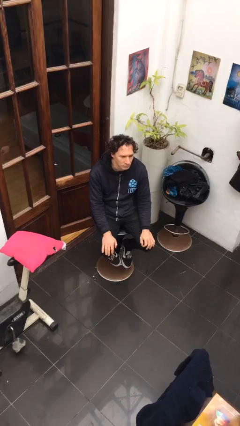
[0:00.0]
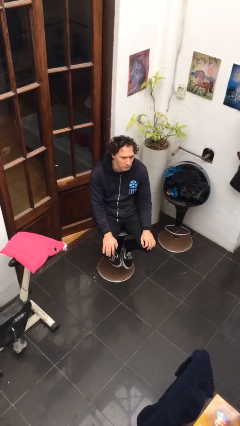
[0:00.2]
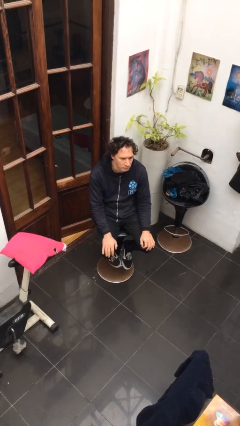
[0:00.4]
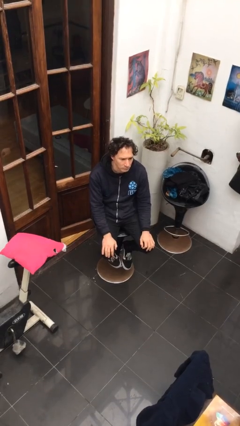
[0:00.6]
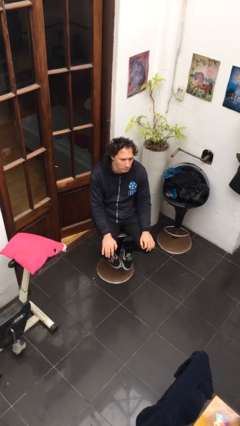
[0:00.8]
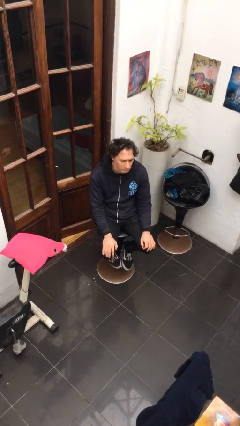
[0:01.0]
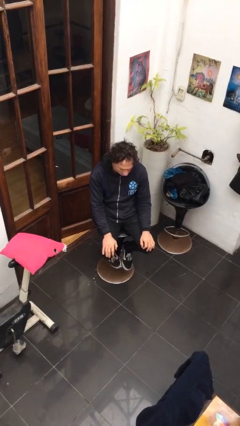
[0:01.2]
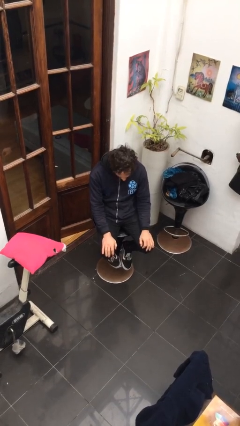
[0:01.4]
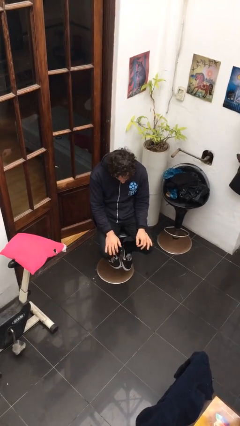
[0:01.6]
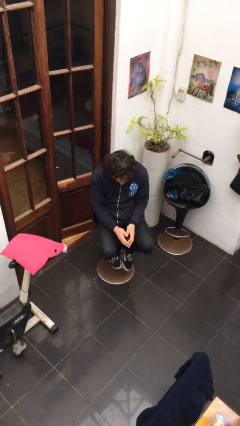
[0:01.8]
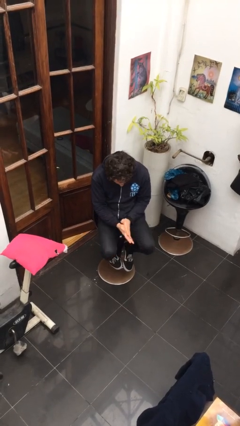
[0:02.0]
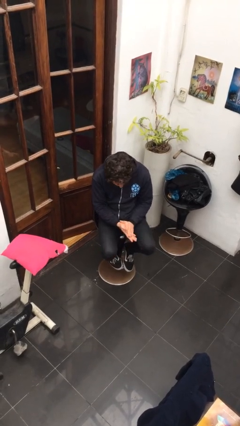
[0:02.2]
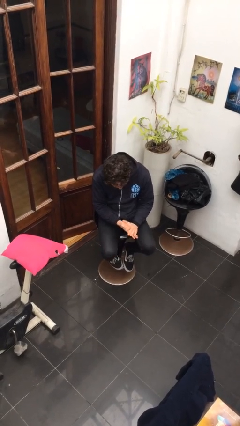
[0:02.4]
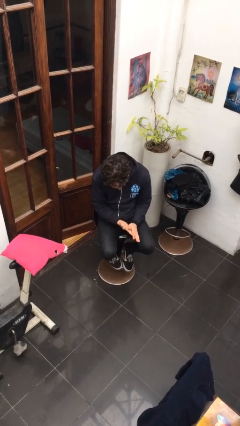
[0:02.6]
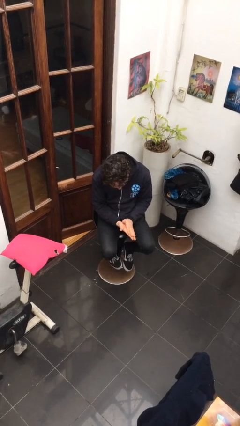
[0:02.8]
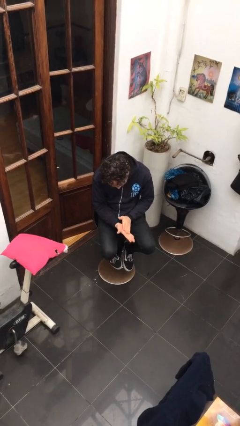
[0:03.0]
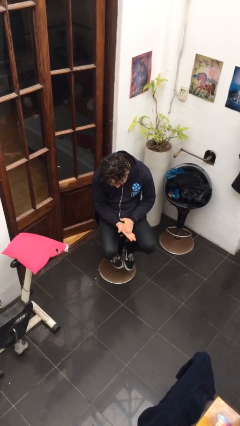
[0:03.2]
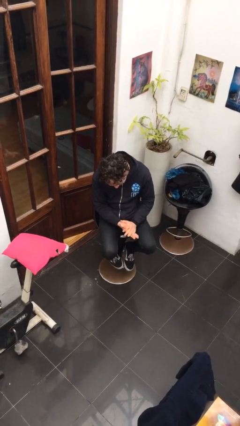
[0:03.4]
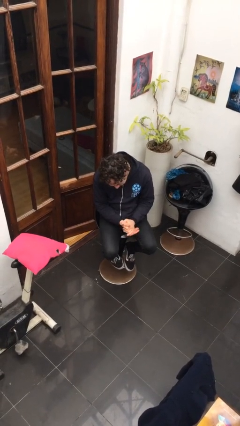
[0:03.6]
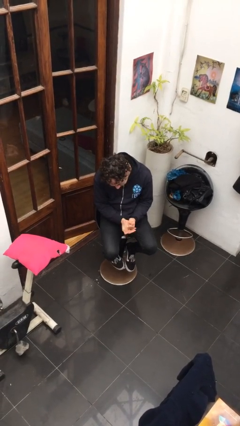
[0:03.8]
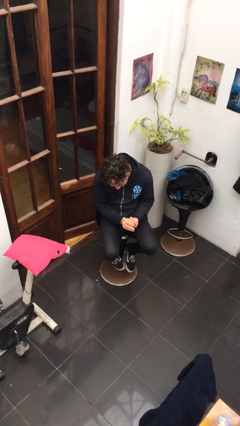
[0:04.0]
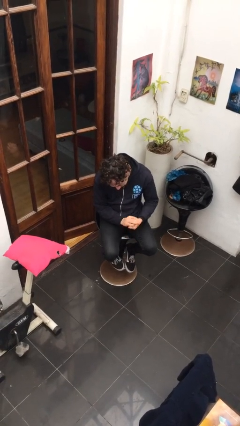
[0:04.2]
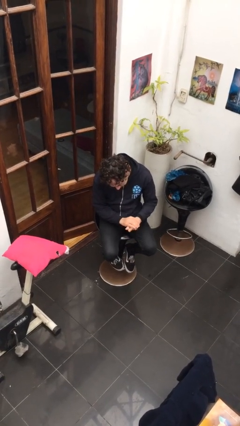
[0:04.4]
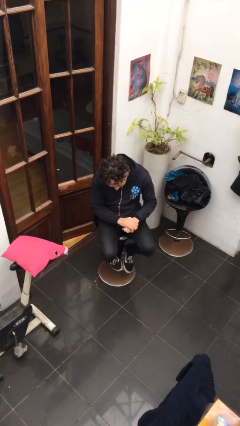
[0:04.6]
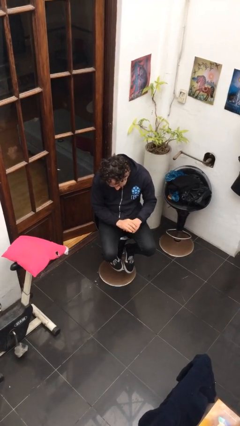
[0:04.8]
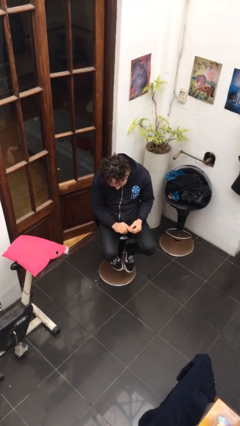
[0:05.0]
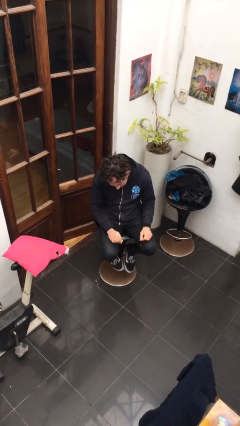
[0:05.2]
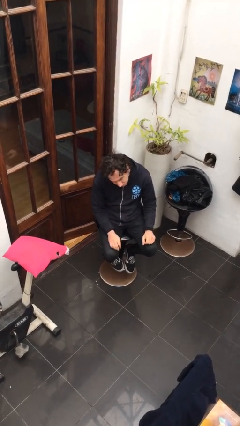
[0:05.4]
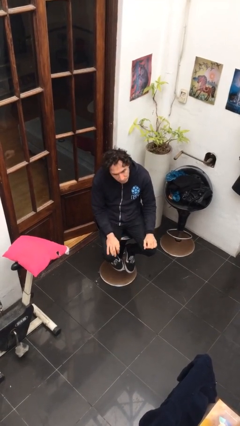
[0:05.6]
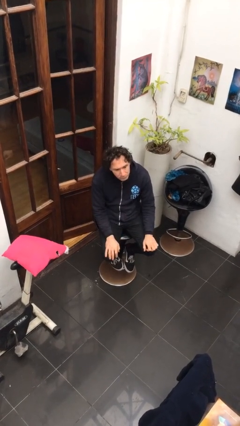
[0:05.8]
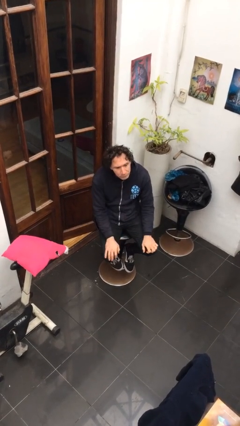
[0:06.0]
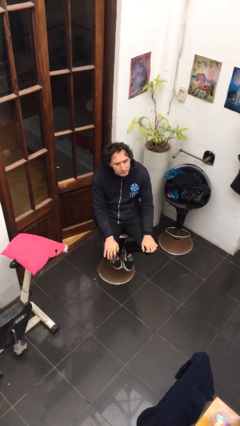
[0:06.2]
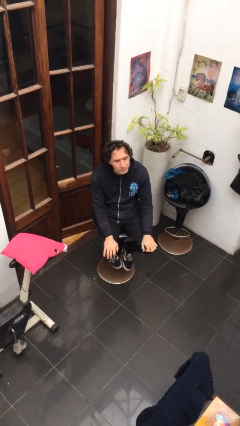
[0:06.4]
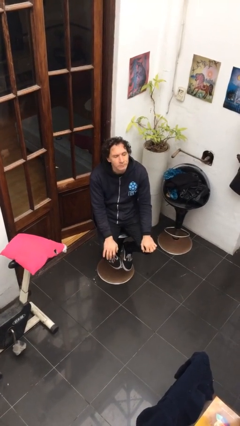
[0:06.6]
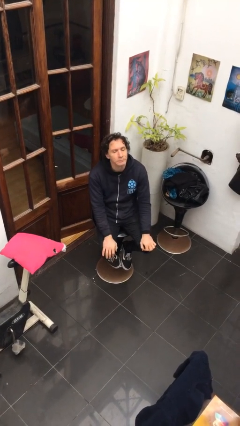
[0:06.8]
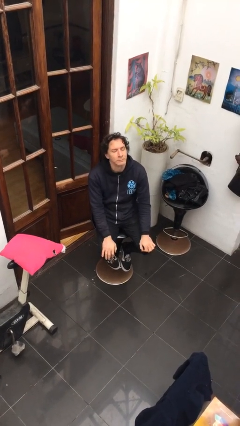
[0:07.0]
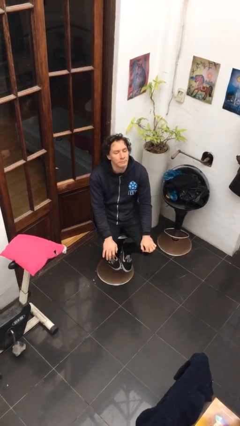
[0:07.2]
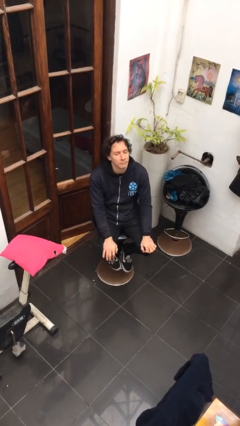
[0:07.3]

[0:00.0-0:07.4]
person looks at hands in lap

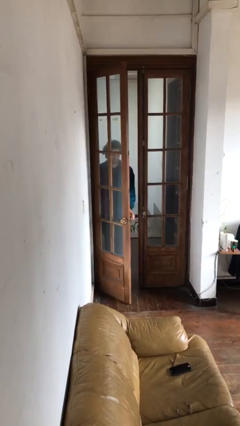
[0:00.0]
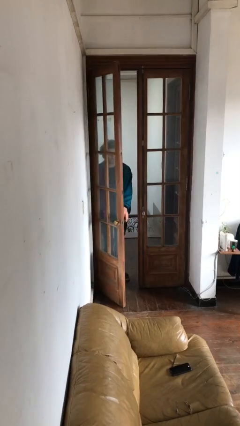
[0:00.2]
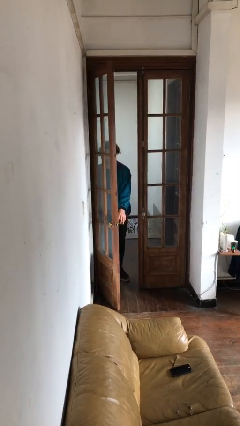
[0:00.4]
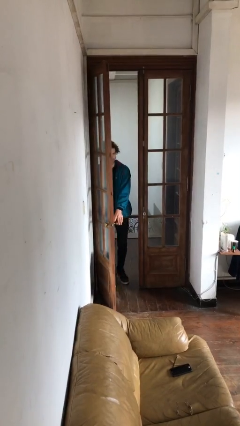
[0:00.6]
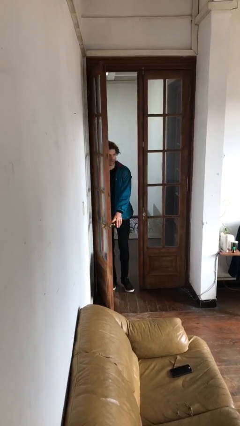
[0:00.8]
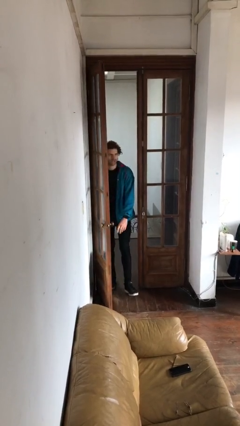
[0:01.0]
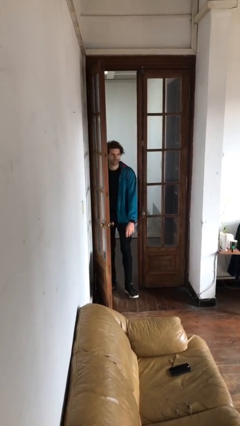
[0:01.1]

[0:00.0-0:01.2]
person opens facility door

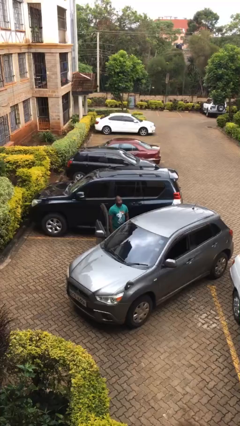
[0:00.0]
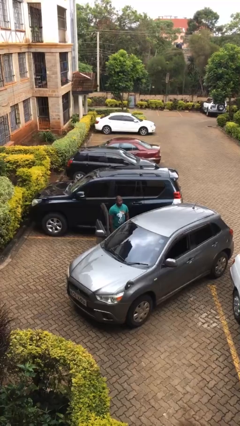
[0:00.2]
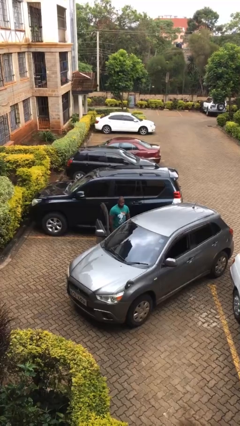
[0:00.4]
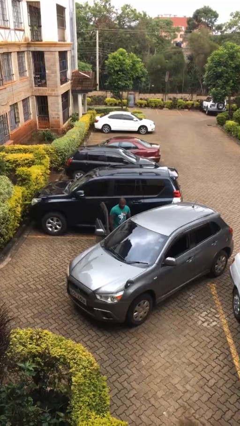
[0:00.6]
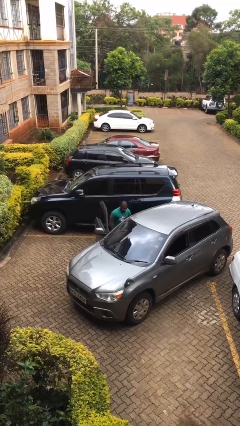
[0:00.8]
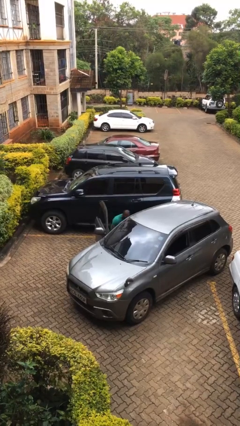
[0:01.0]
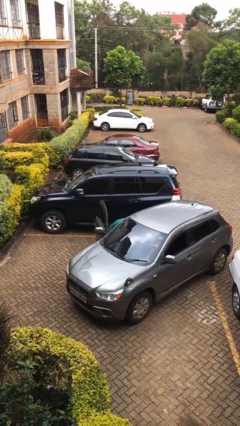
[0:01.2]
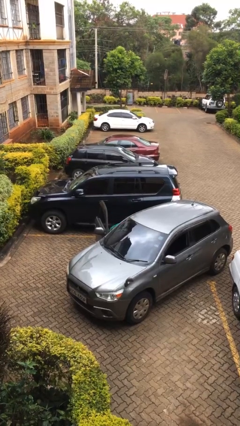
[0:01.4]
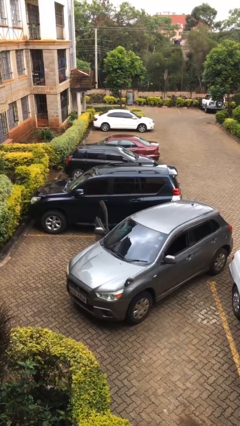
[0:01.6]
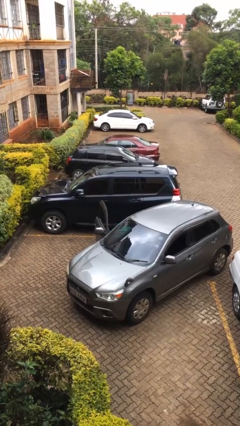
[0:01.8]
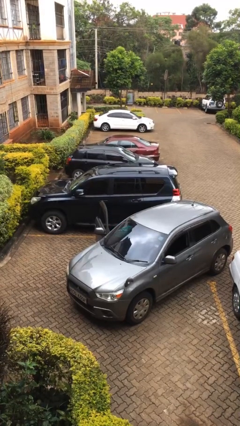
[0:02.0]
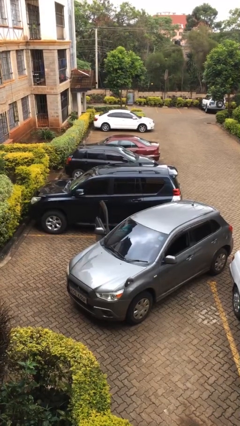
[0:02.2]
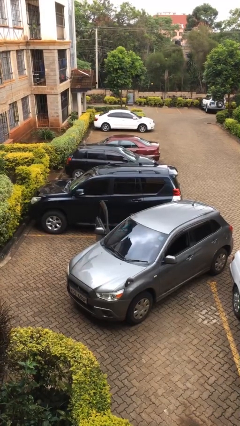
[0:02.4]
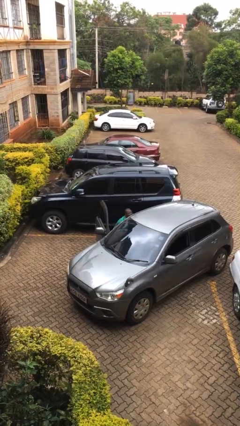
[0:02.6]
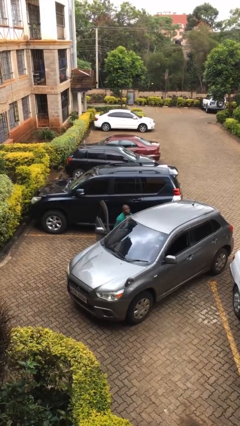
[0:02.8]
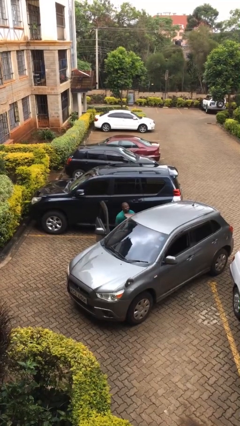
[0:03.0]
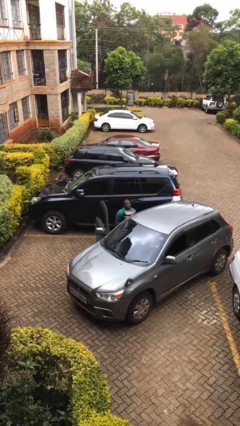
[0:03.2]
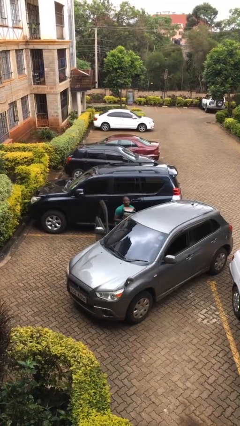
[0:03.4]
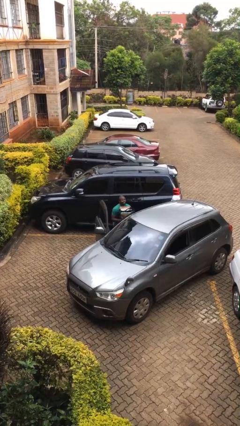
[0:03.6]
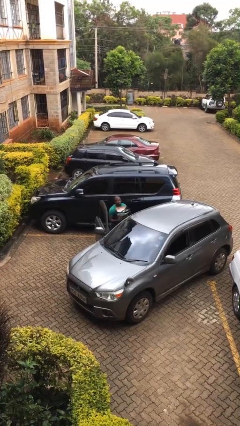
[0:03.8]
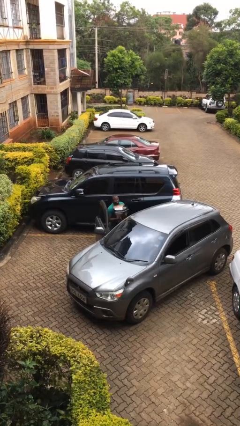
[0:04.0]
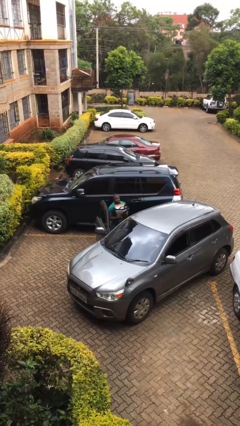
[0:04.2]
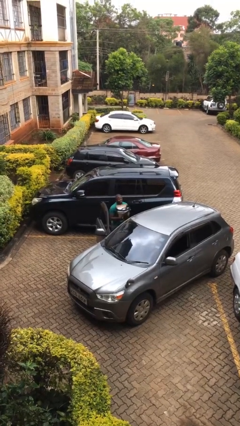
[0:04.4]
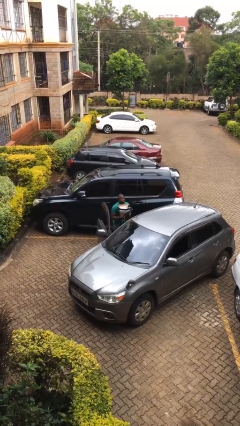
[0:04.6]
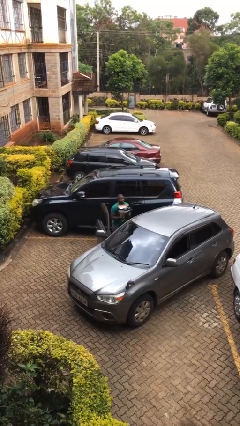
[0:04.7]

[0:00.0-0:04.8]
person unloads car

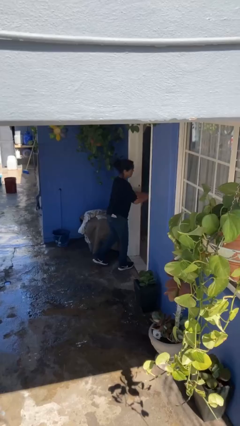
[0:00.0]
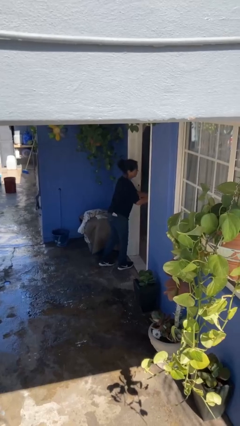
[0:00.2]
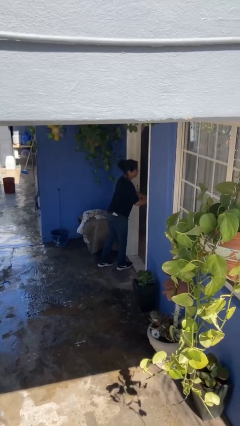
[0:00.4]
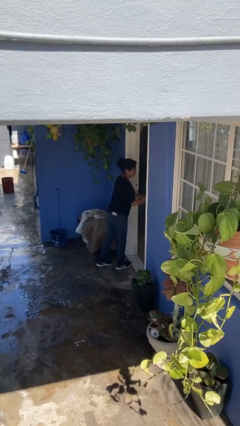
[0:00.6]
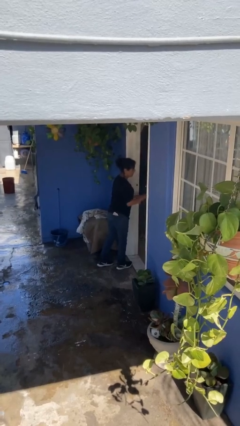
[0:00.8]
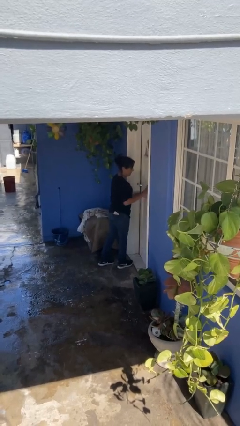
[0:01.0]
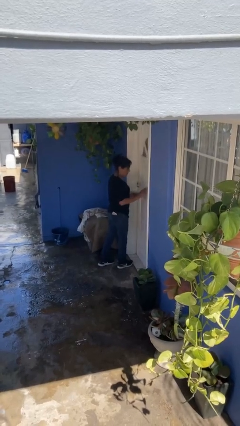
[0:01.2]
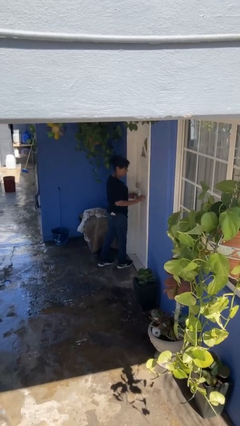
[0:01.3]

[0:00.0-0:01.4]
person closes facility door

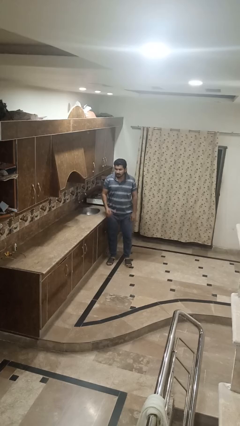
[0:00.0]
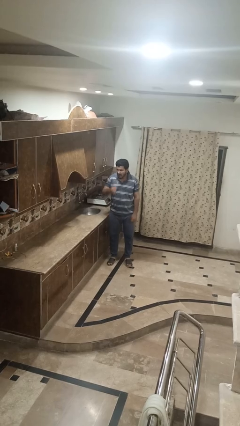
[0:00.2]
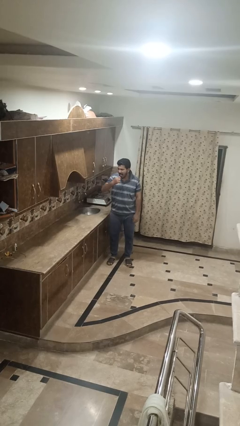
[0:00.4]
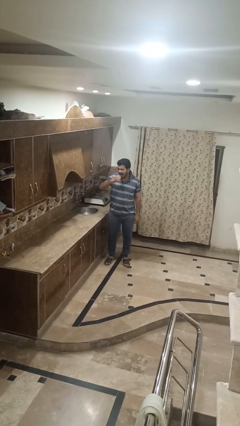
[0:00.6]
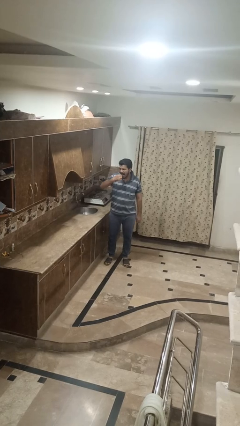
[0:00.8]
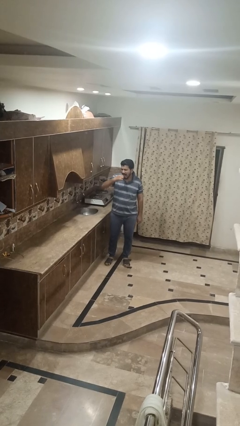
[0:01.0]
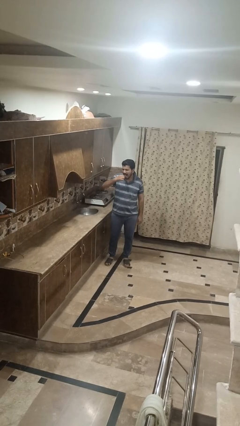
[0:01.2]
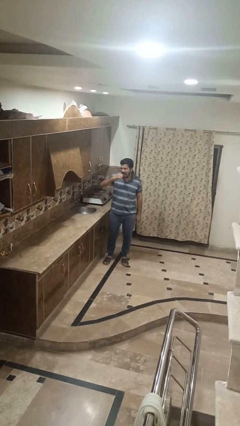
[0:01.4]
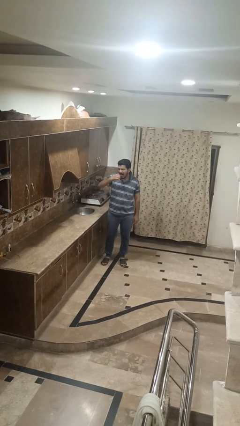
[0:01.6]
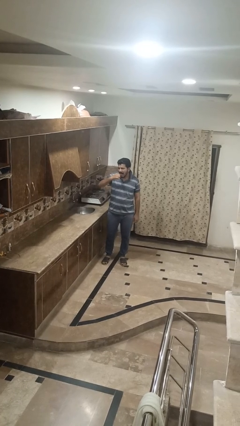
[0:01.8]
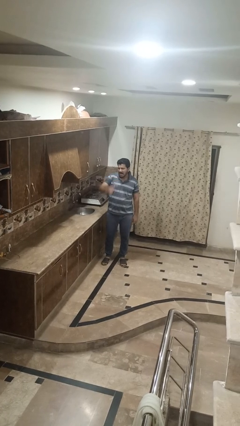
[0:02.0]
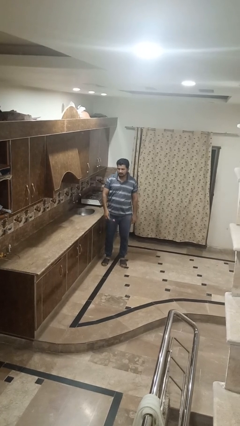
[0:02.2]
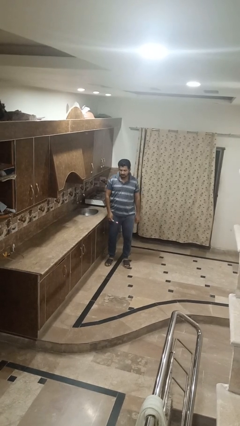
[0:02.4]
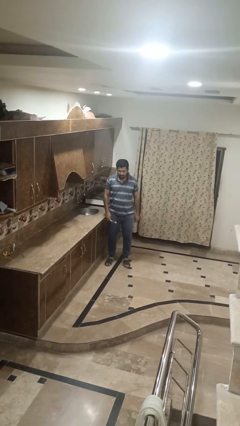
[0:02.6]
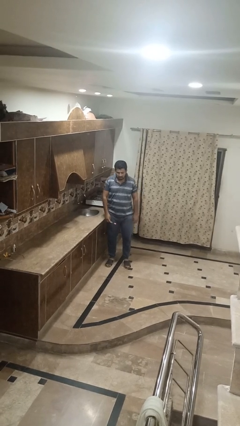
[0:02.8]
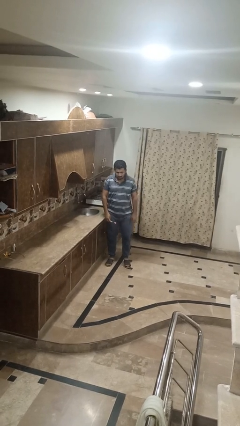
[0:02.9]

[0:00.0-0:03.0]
person brushes teeth
